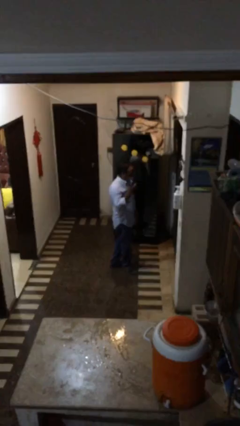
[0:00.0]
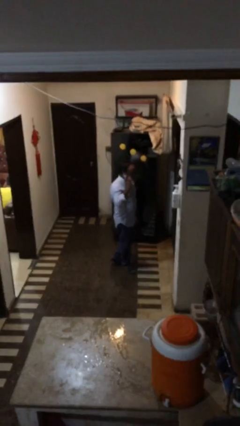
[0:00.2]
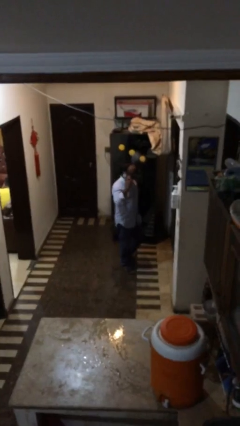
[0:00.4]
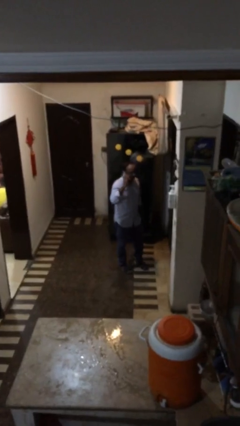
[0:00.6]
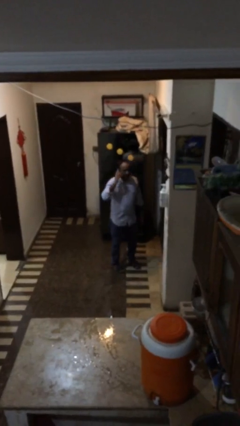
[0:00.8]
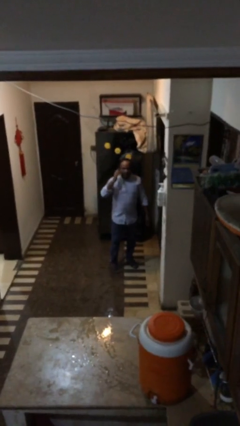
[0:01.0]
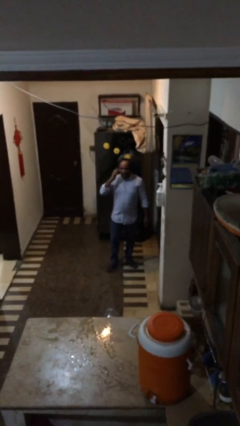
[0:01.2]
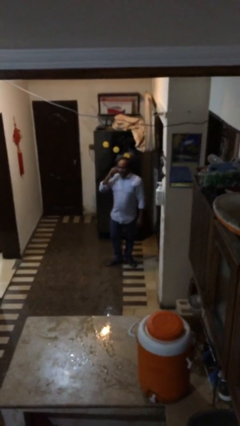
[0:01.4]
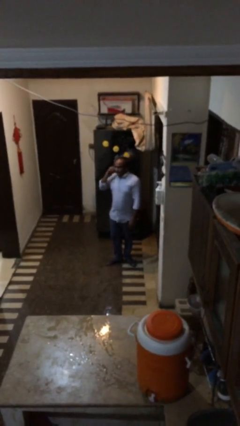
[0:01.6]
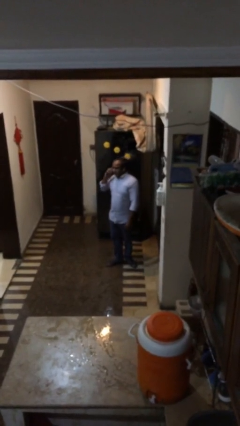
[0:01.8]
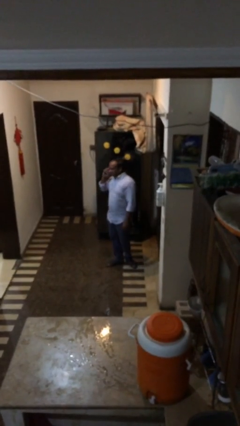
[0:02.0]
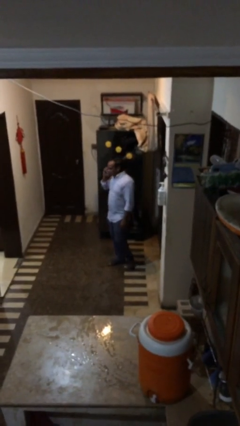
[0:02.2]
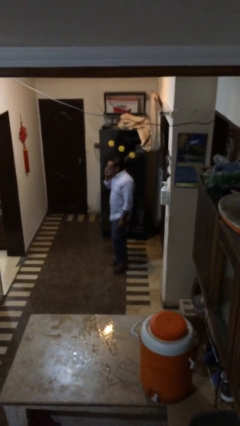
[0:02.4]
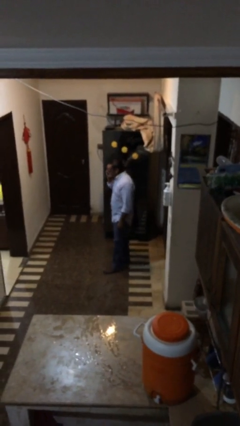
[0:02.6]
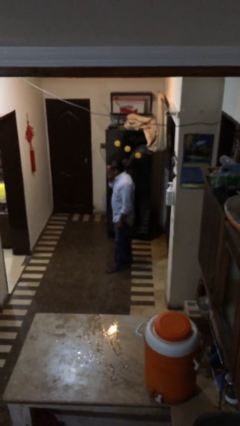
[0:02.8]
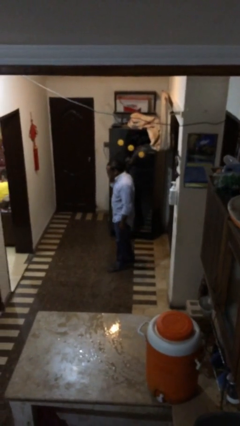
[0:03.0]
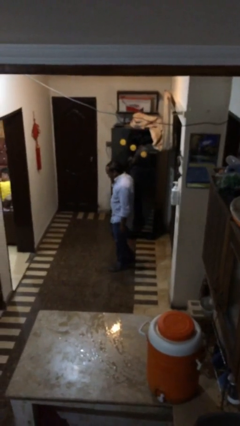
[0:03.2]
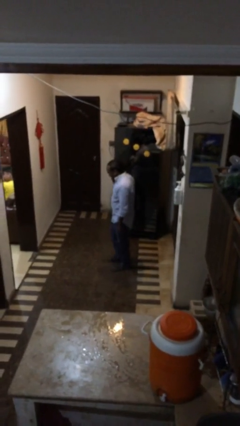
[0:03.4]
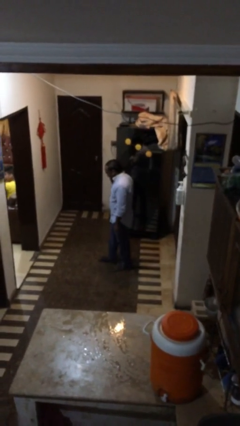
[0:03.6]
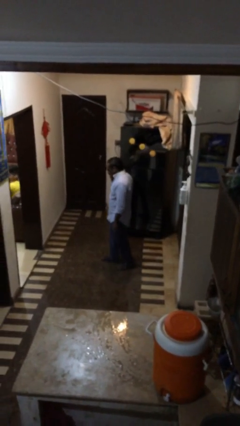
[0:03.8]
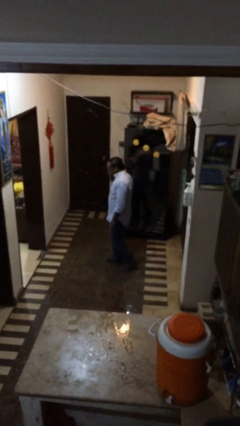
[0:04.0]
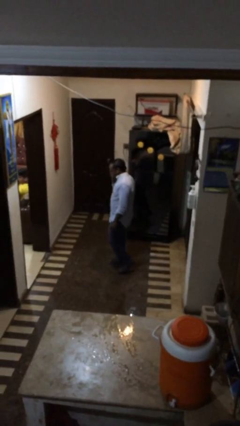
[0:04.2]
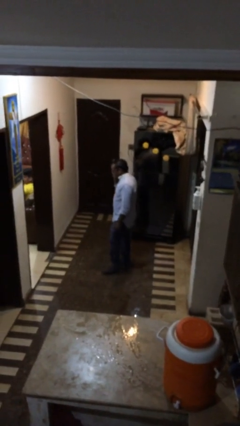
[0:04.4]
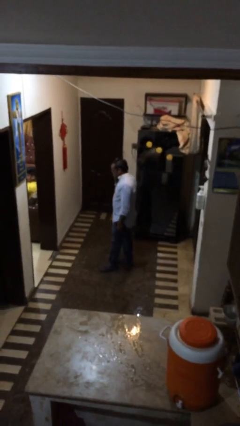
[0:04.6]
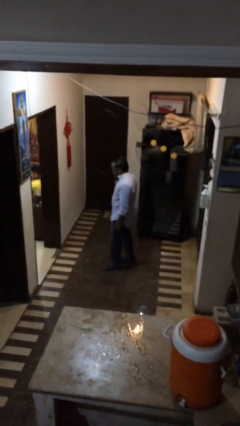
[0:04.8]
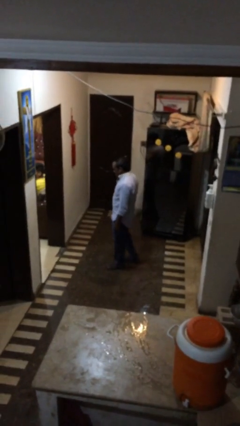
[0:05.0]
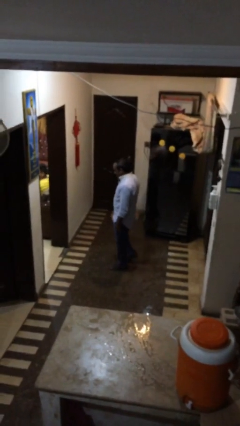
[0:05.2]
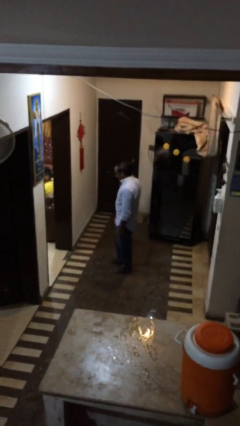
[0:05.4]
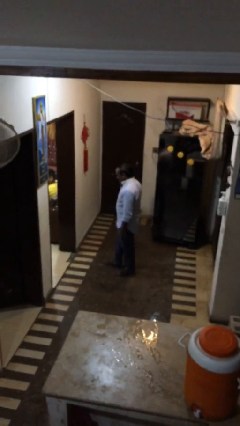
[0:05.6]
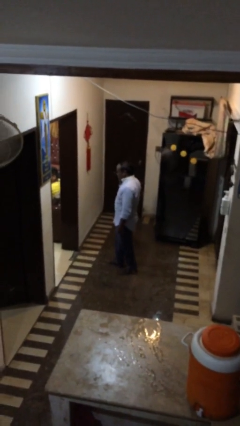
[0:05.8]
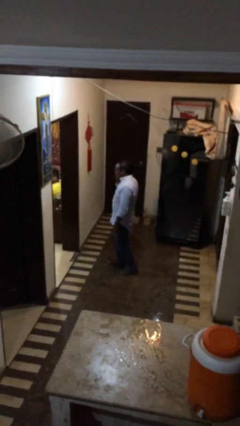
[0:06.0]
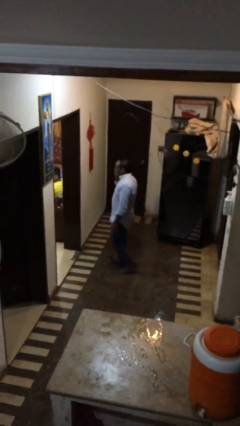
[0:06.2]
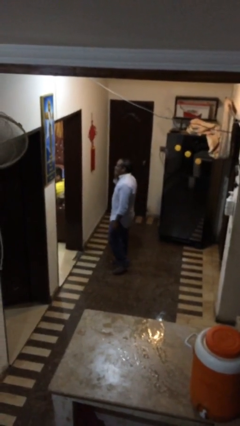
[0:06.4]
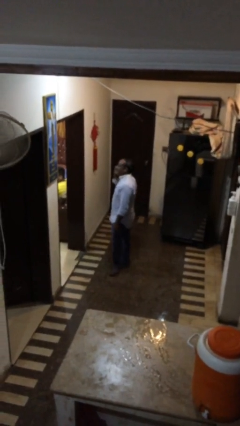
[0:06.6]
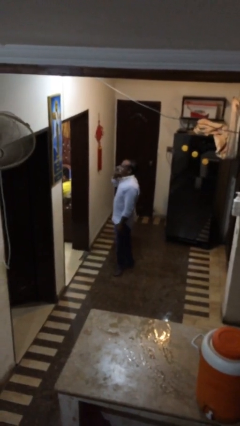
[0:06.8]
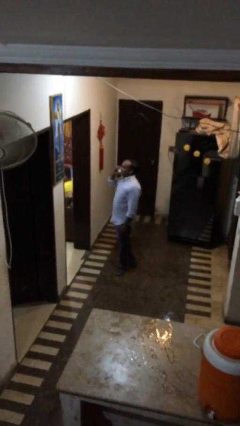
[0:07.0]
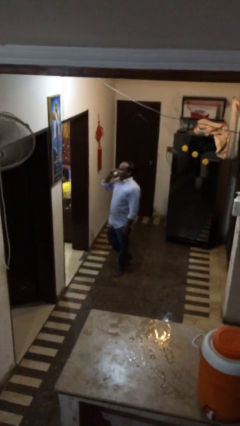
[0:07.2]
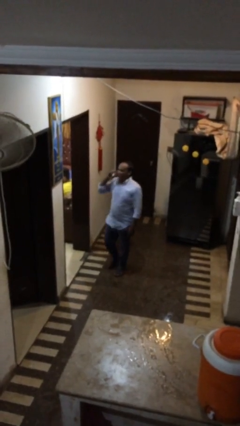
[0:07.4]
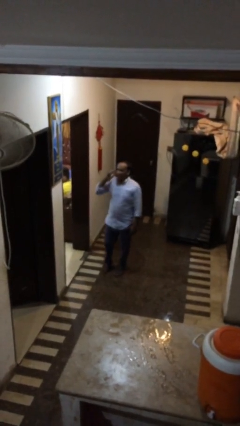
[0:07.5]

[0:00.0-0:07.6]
person talks on phone

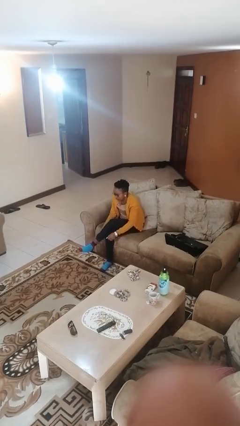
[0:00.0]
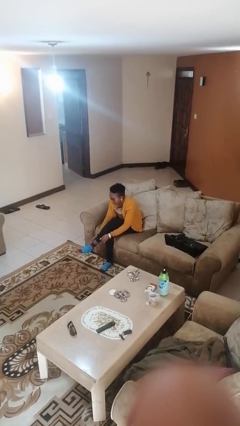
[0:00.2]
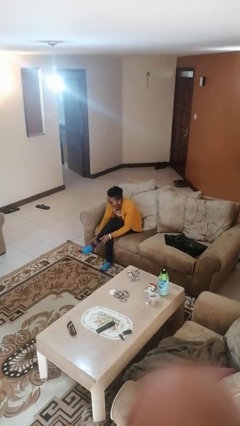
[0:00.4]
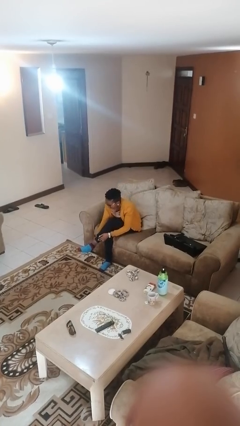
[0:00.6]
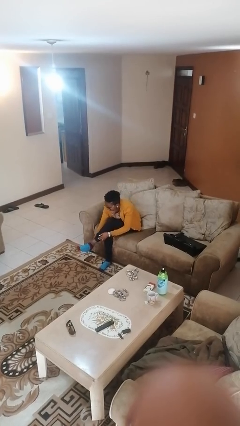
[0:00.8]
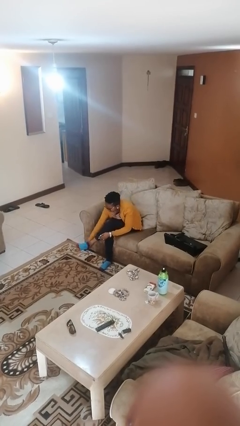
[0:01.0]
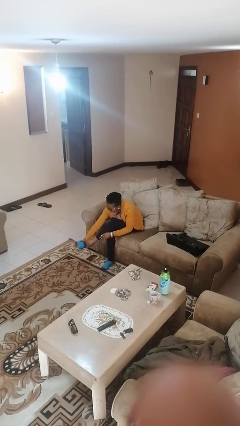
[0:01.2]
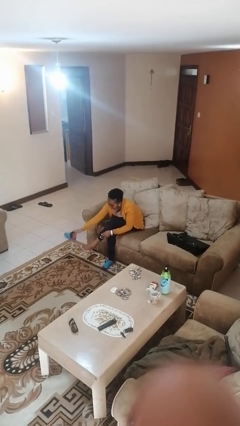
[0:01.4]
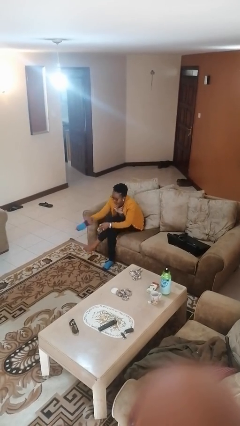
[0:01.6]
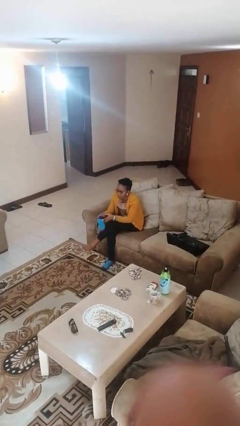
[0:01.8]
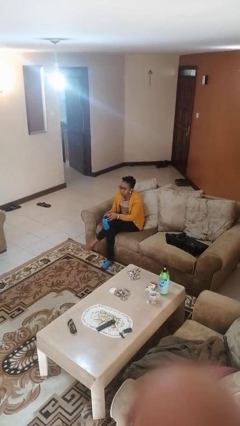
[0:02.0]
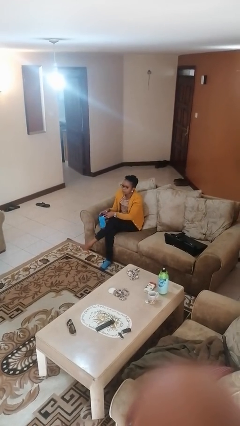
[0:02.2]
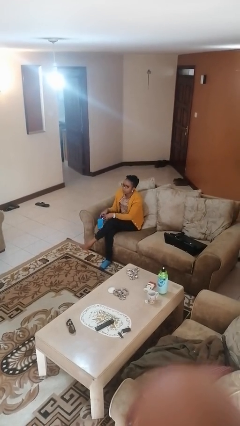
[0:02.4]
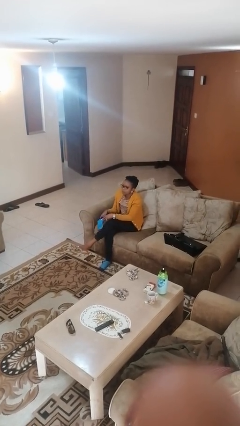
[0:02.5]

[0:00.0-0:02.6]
person takes off socks

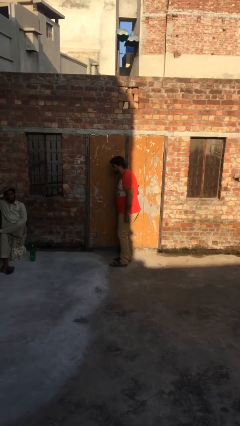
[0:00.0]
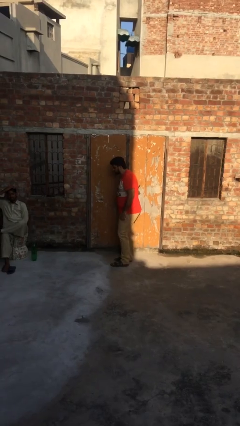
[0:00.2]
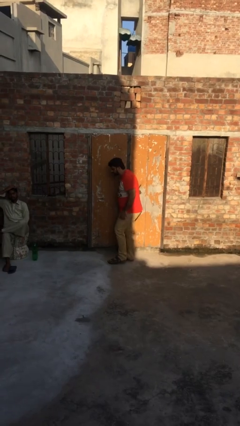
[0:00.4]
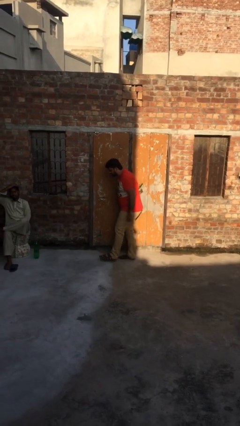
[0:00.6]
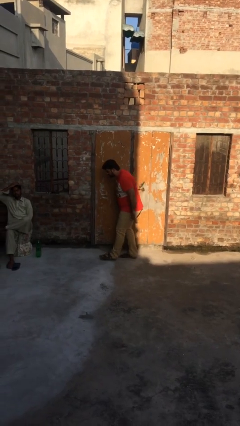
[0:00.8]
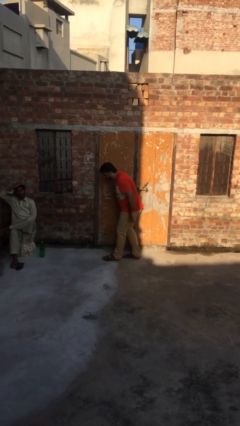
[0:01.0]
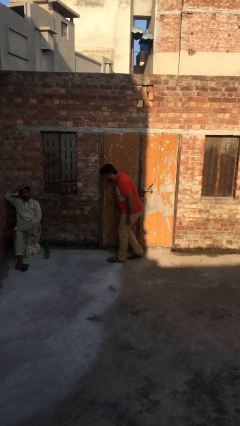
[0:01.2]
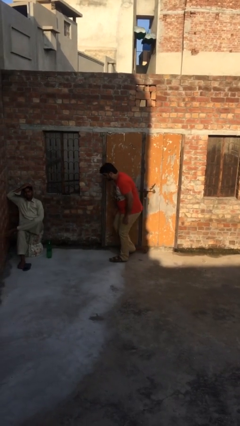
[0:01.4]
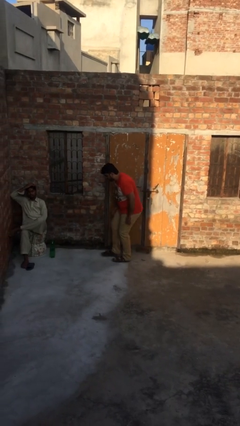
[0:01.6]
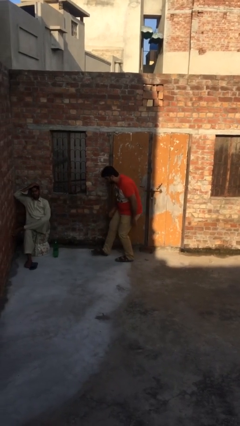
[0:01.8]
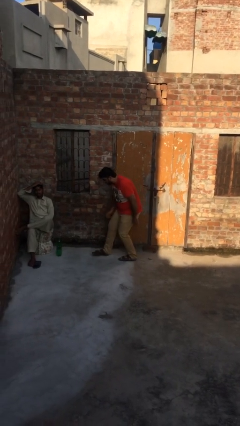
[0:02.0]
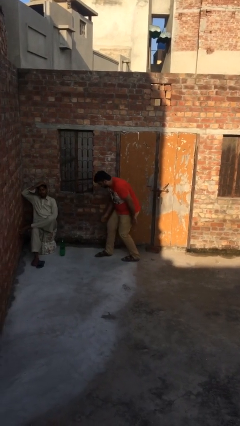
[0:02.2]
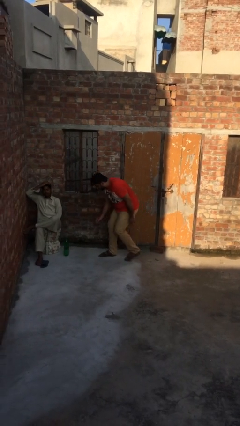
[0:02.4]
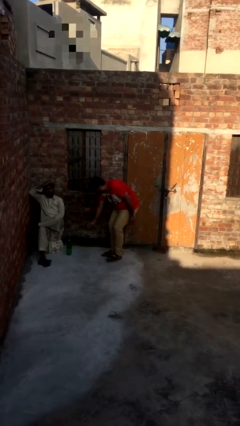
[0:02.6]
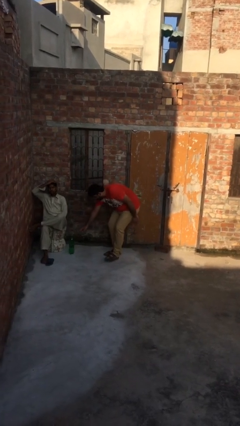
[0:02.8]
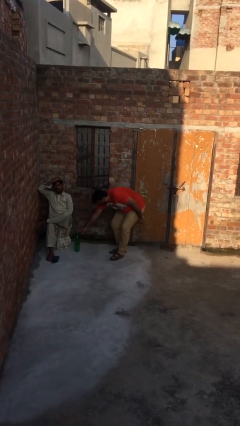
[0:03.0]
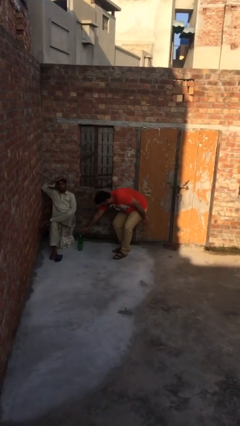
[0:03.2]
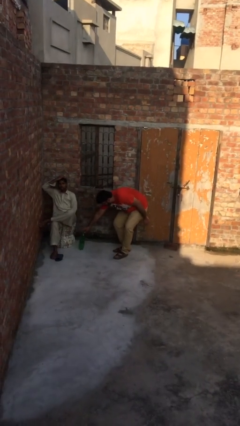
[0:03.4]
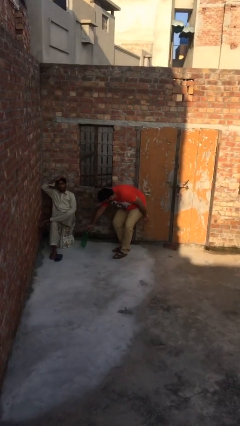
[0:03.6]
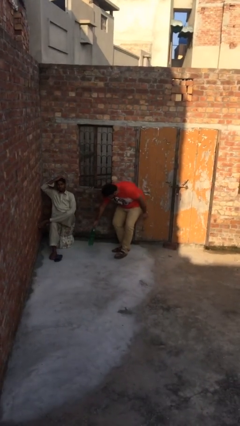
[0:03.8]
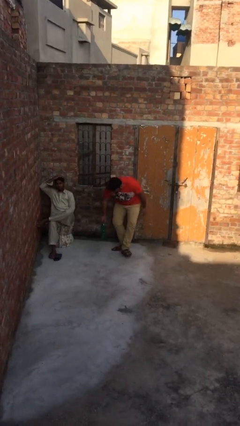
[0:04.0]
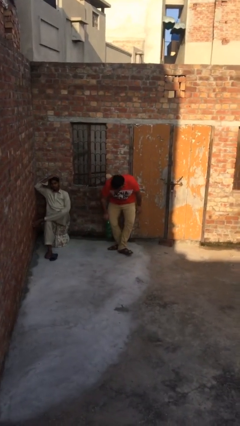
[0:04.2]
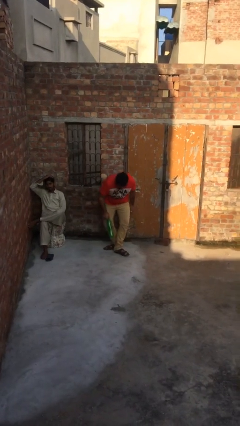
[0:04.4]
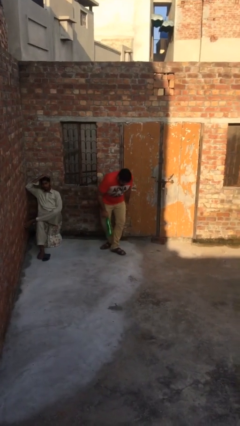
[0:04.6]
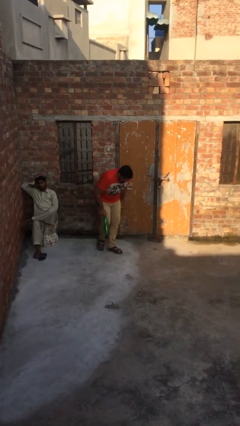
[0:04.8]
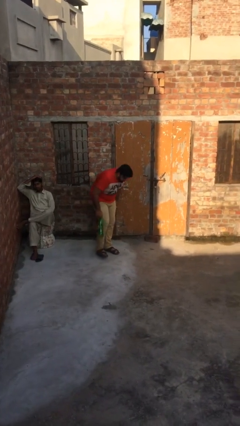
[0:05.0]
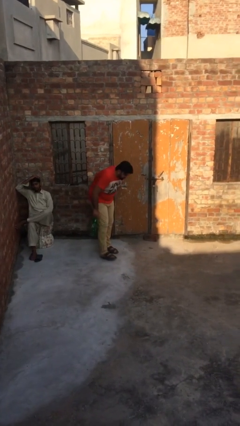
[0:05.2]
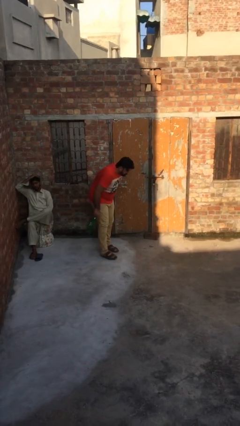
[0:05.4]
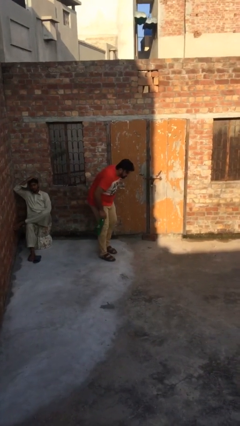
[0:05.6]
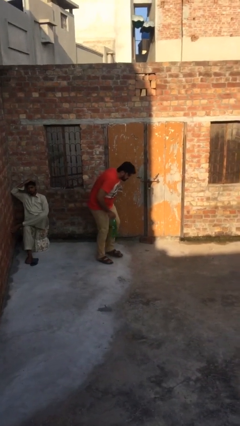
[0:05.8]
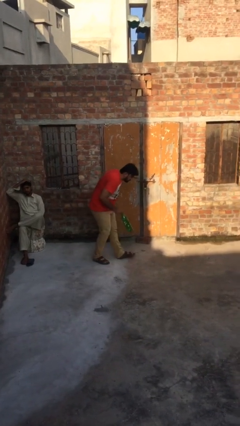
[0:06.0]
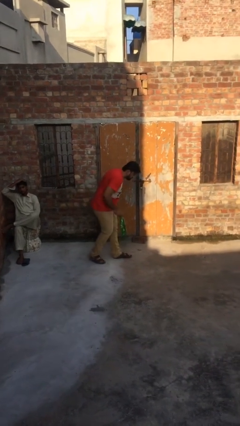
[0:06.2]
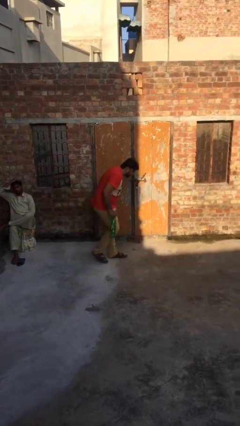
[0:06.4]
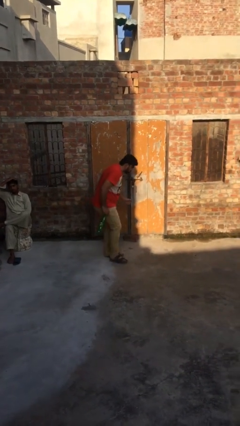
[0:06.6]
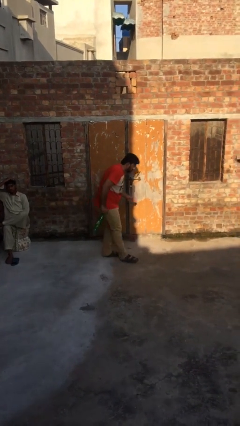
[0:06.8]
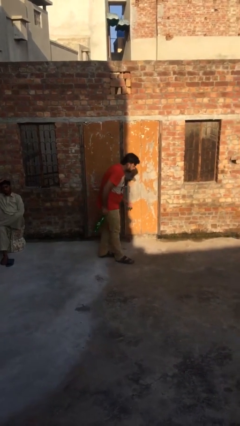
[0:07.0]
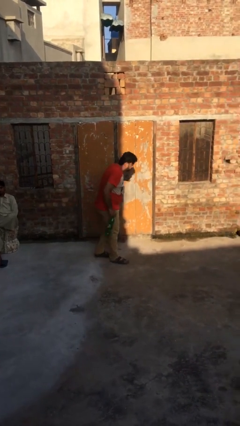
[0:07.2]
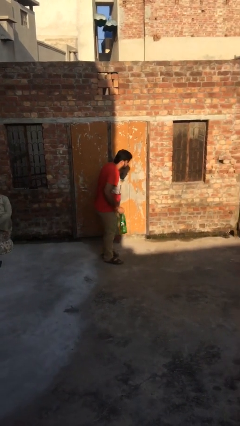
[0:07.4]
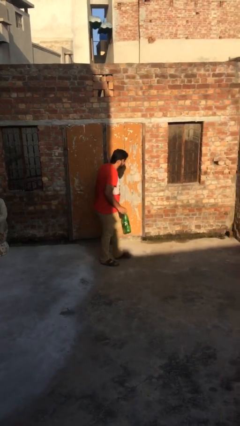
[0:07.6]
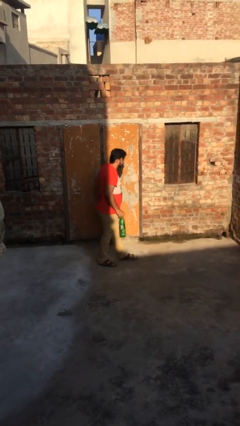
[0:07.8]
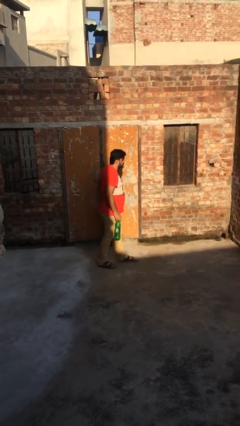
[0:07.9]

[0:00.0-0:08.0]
person steals object from person
